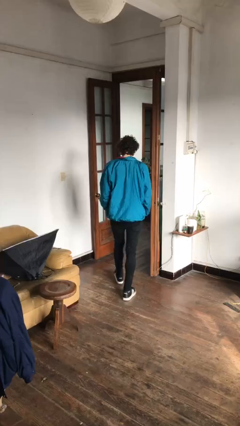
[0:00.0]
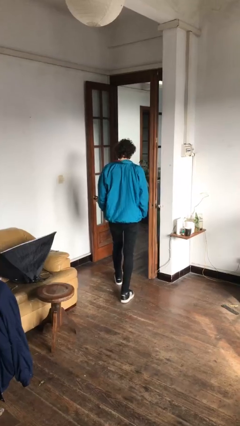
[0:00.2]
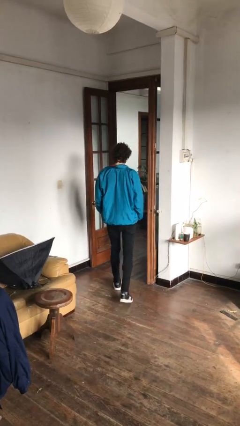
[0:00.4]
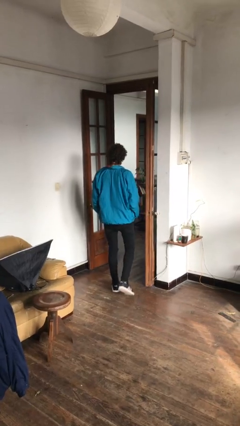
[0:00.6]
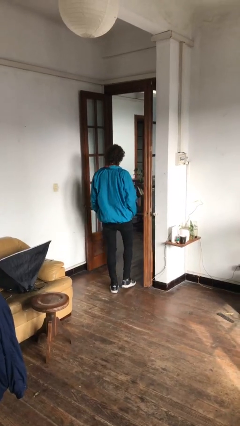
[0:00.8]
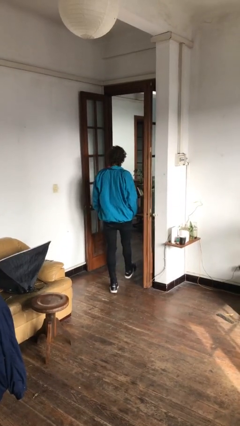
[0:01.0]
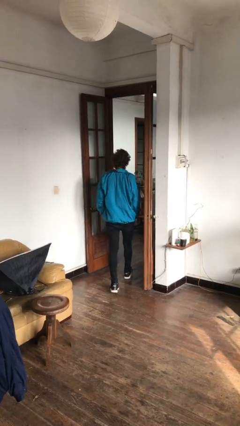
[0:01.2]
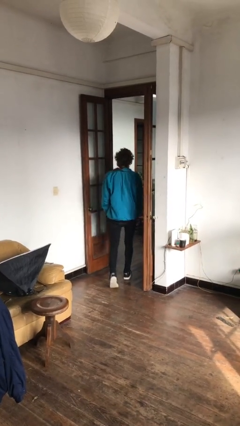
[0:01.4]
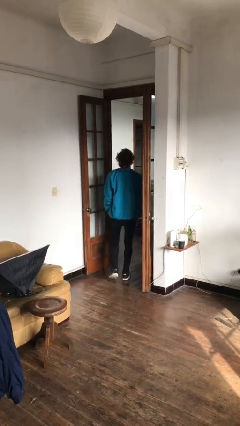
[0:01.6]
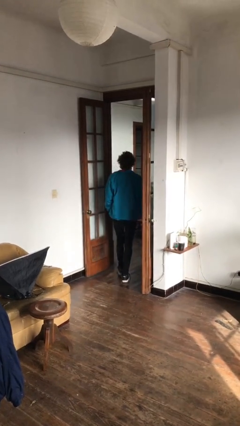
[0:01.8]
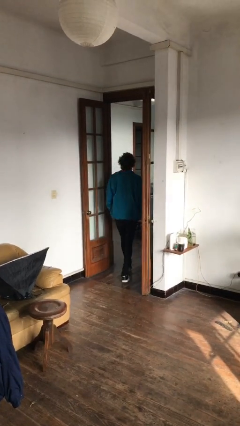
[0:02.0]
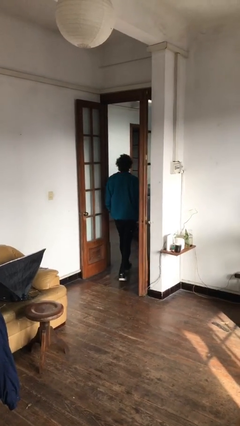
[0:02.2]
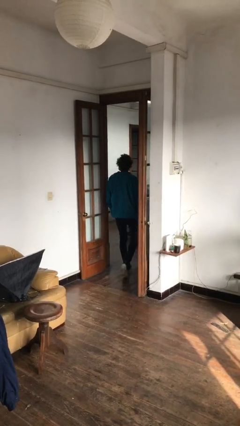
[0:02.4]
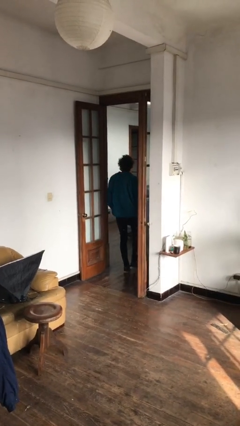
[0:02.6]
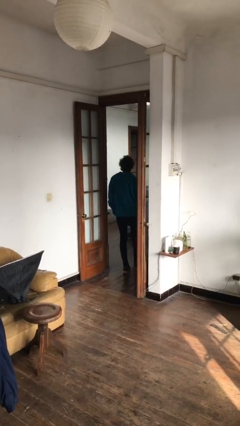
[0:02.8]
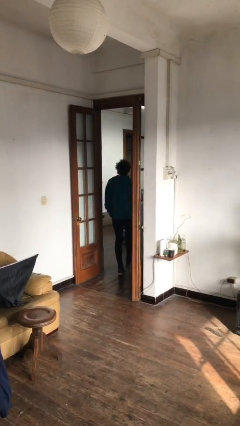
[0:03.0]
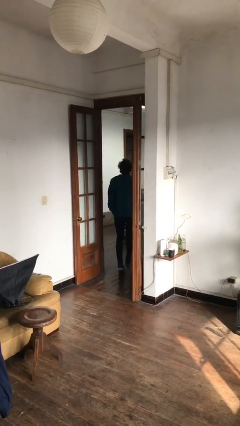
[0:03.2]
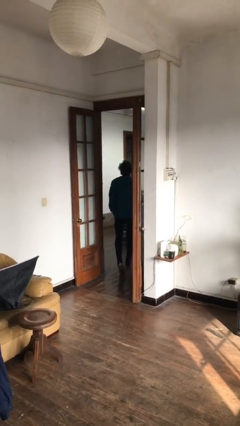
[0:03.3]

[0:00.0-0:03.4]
person exits scene through structure

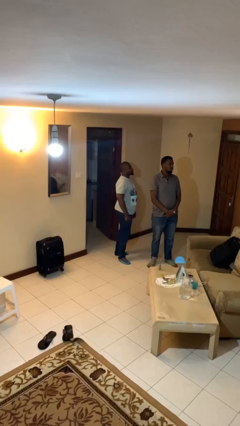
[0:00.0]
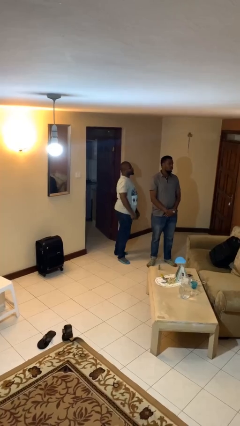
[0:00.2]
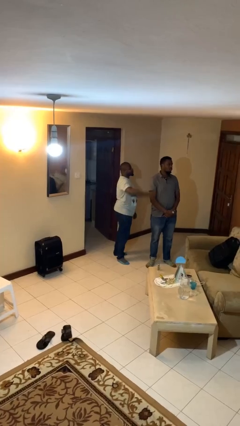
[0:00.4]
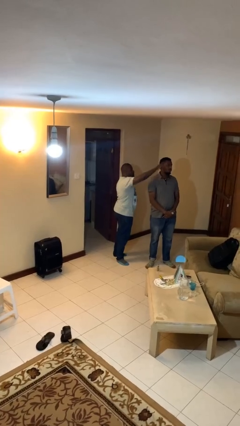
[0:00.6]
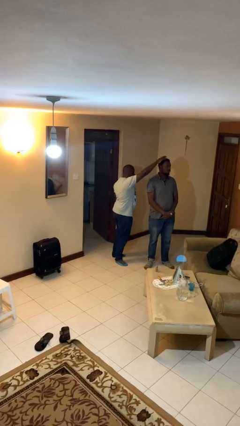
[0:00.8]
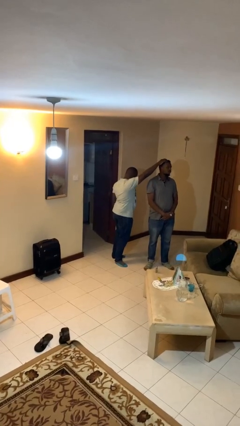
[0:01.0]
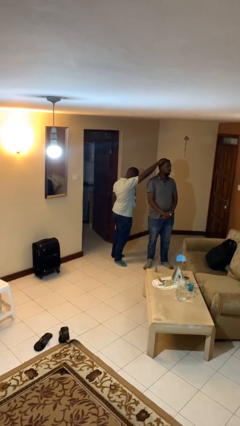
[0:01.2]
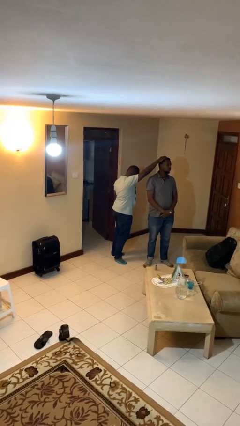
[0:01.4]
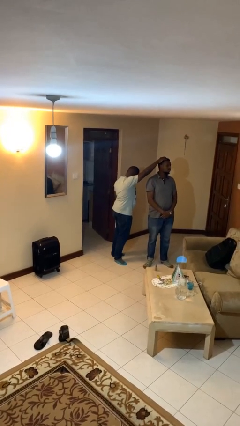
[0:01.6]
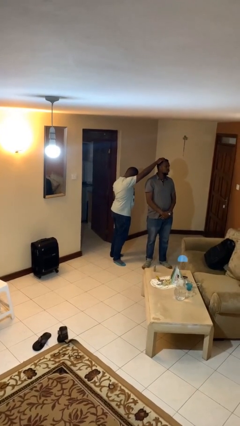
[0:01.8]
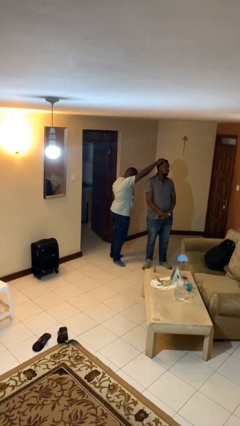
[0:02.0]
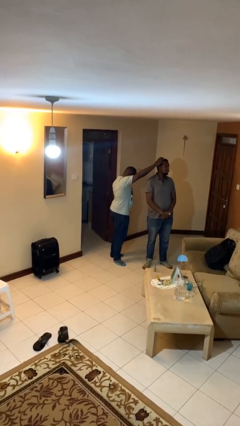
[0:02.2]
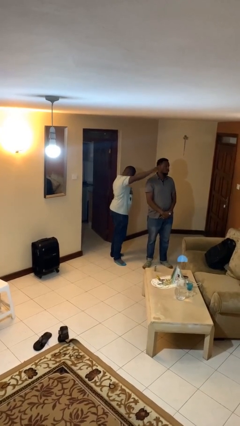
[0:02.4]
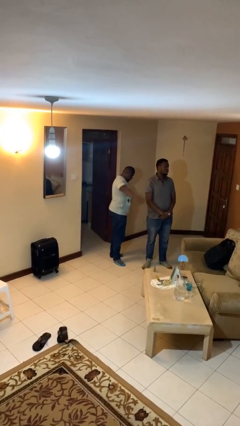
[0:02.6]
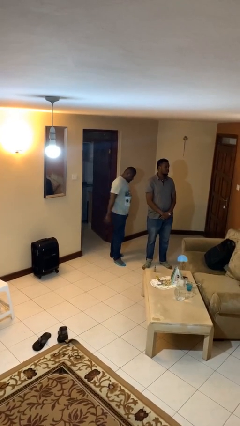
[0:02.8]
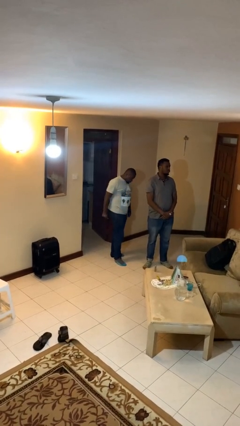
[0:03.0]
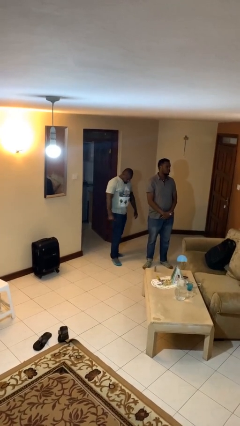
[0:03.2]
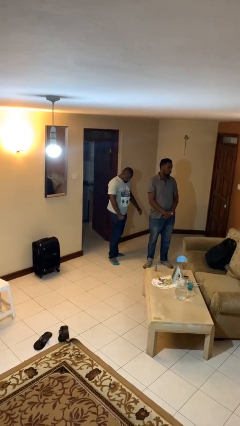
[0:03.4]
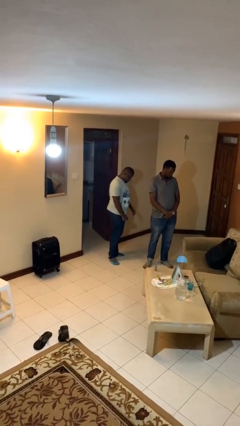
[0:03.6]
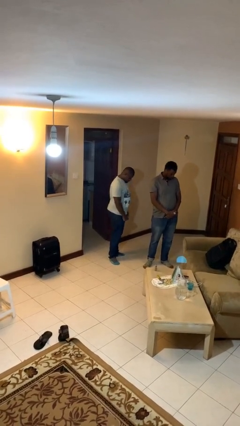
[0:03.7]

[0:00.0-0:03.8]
person grabs person by hair

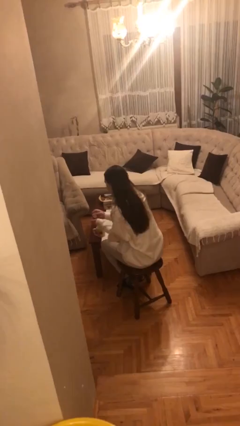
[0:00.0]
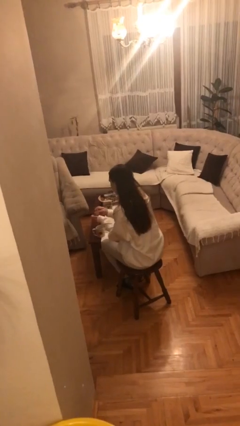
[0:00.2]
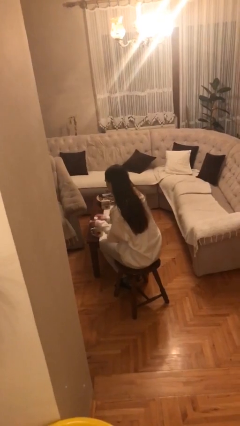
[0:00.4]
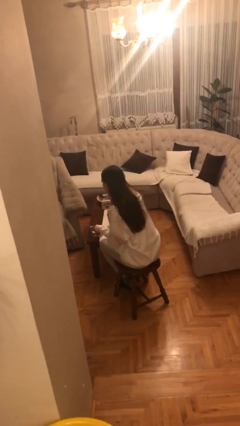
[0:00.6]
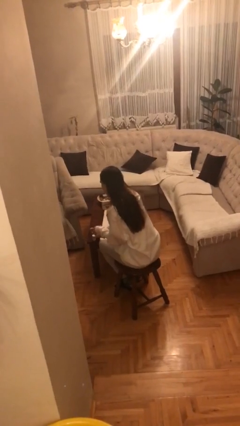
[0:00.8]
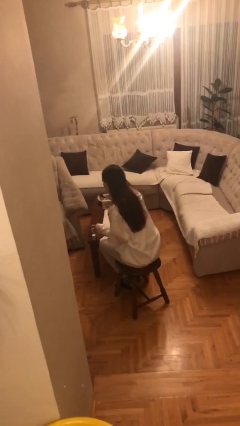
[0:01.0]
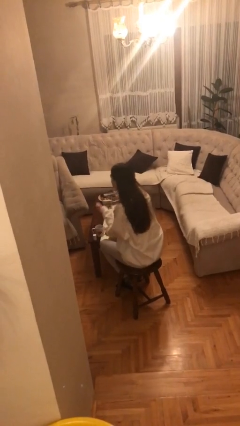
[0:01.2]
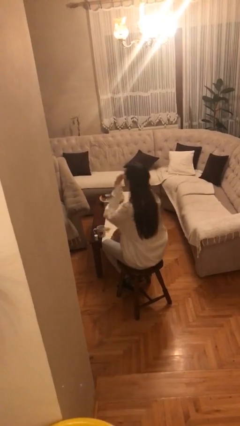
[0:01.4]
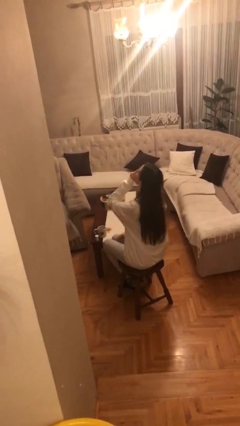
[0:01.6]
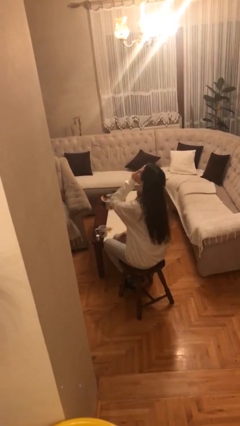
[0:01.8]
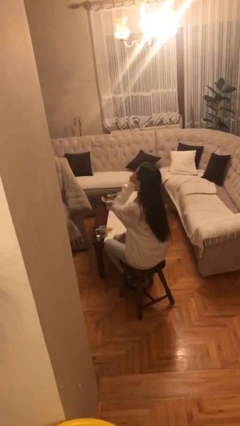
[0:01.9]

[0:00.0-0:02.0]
person takes medicine pills

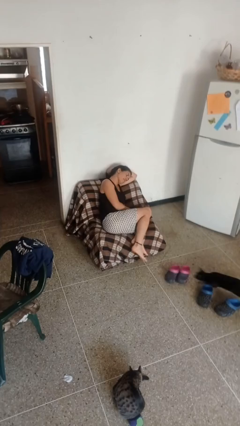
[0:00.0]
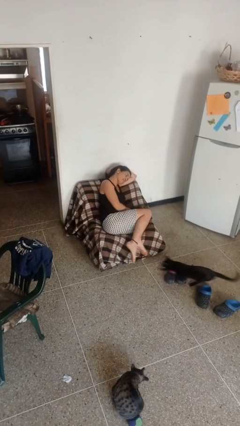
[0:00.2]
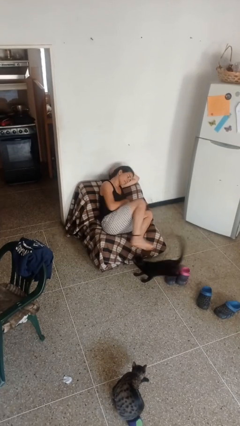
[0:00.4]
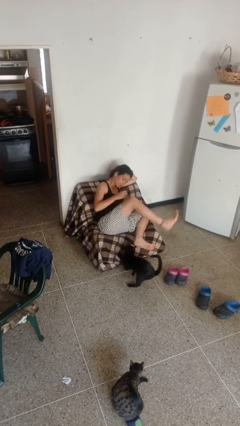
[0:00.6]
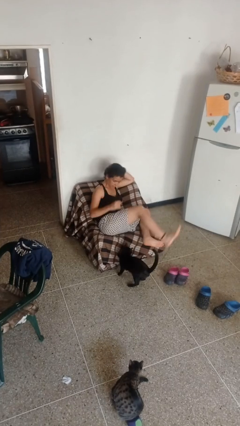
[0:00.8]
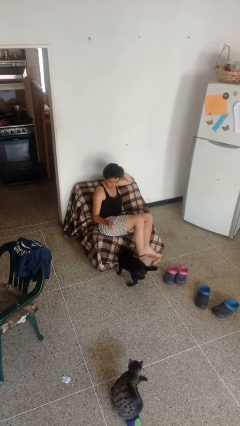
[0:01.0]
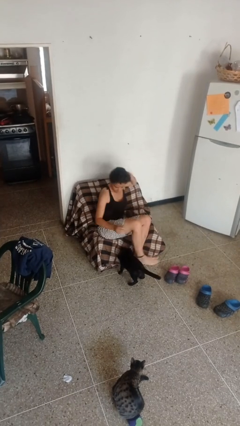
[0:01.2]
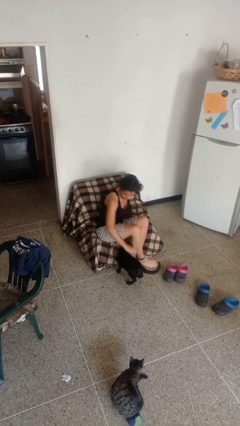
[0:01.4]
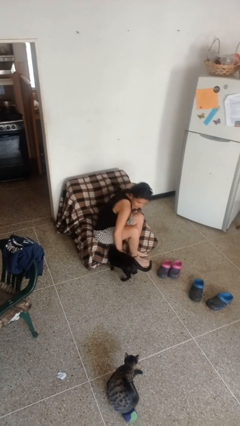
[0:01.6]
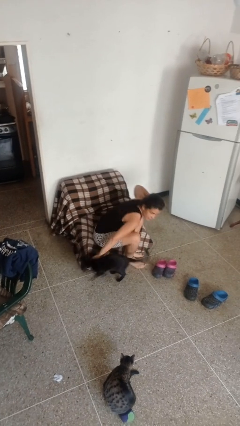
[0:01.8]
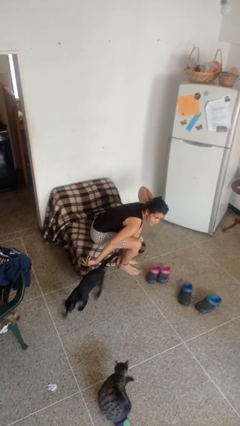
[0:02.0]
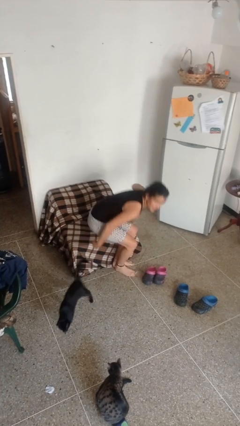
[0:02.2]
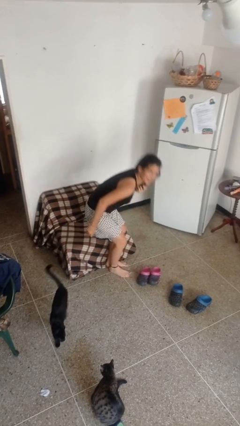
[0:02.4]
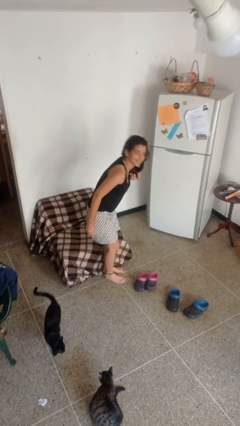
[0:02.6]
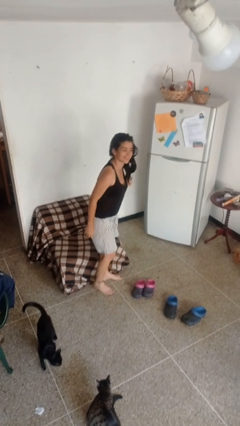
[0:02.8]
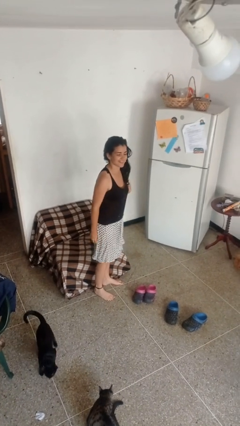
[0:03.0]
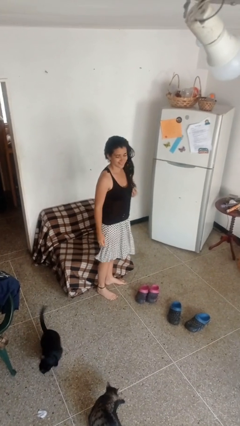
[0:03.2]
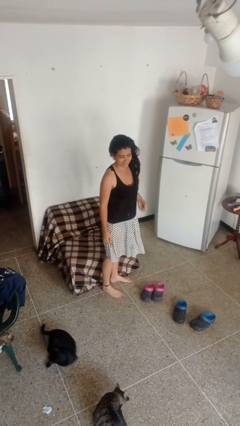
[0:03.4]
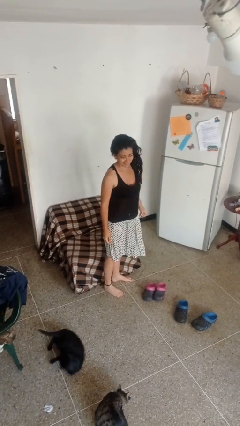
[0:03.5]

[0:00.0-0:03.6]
person stands up

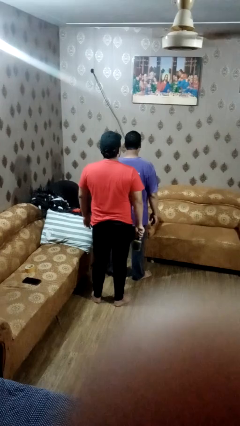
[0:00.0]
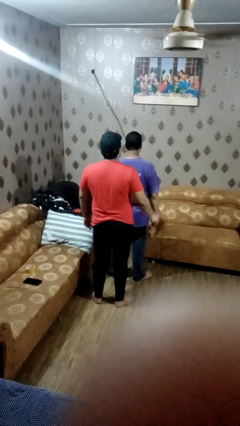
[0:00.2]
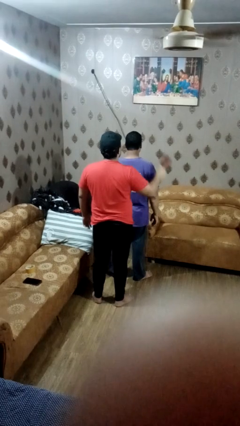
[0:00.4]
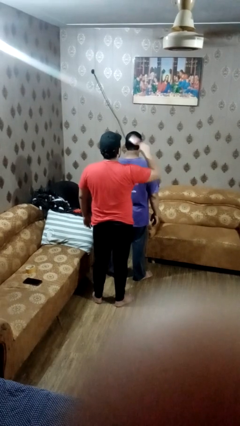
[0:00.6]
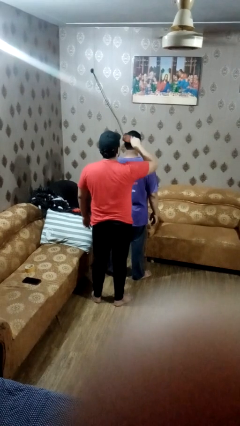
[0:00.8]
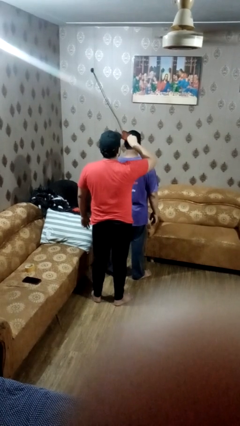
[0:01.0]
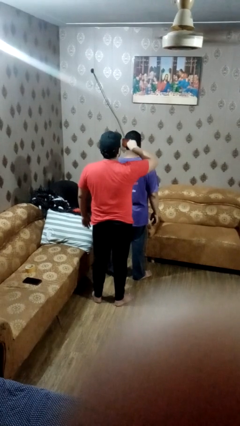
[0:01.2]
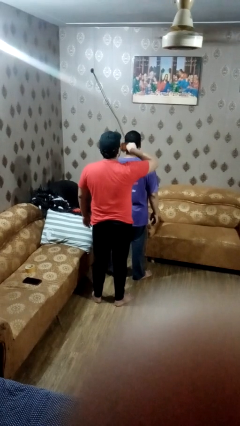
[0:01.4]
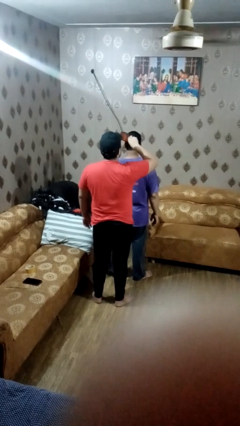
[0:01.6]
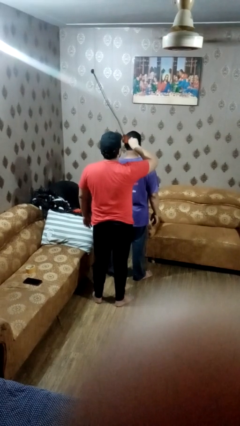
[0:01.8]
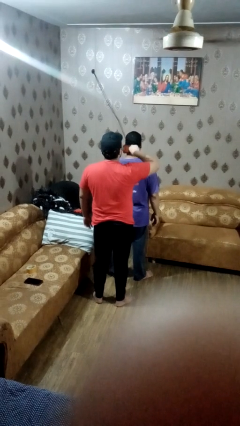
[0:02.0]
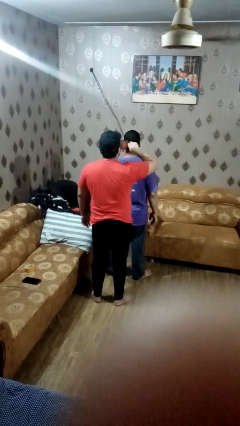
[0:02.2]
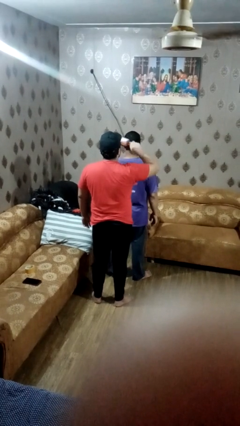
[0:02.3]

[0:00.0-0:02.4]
person brushes hair of person

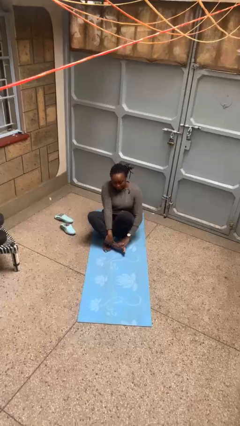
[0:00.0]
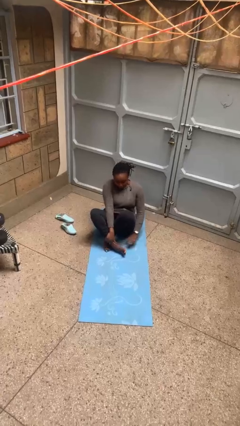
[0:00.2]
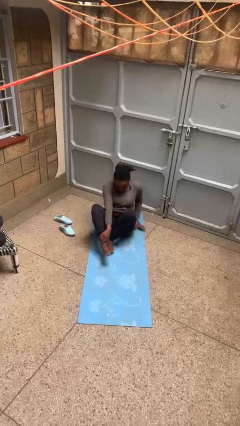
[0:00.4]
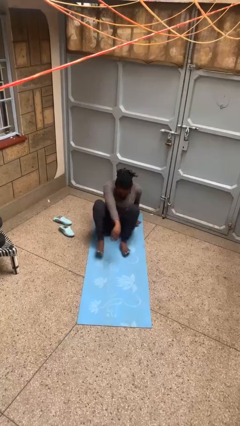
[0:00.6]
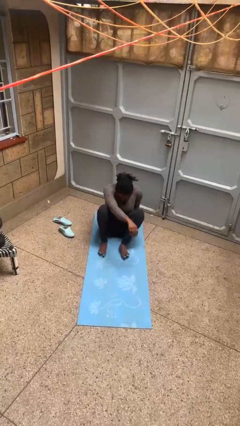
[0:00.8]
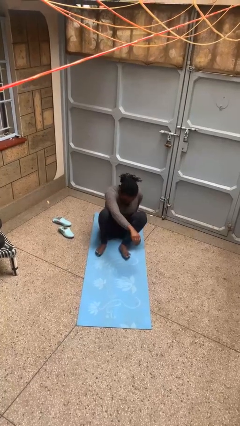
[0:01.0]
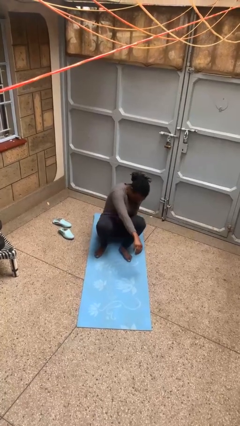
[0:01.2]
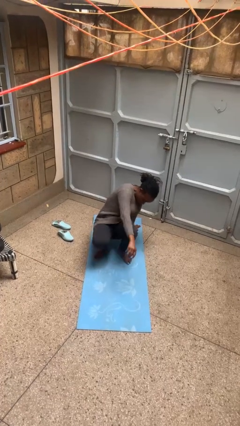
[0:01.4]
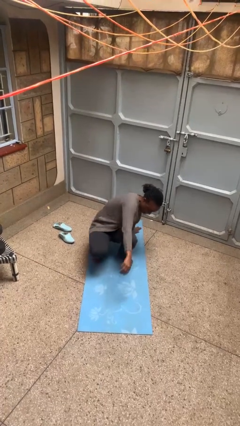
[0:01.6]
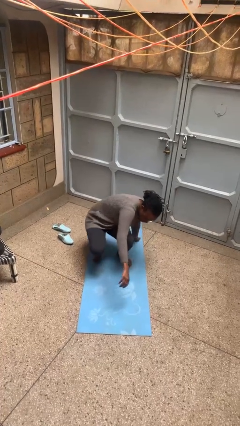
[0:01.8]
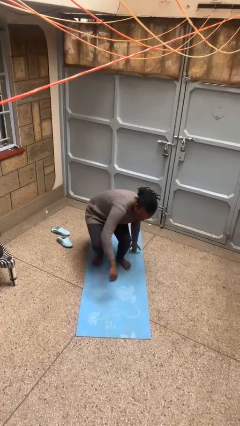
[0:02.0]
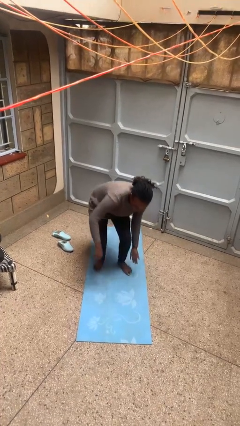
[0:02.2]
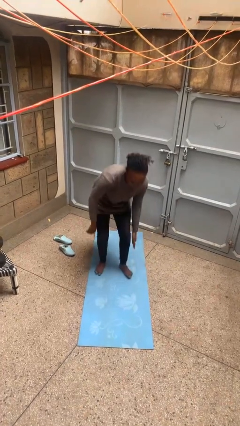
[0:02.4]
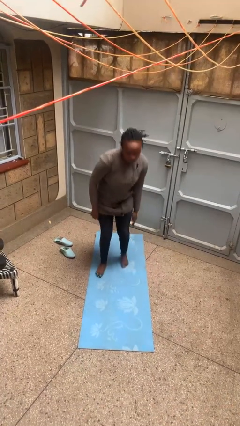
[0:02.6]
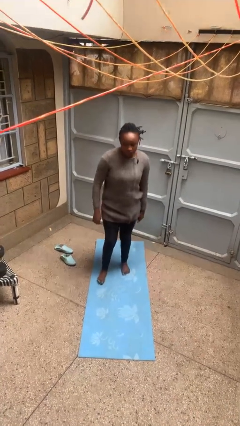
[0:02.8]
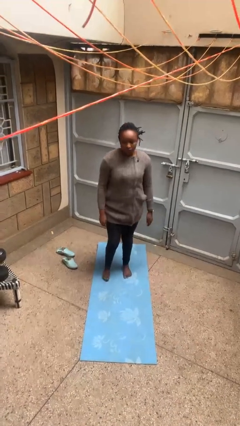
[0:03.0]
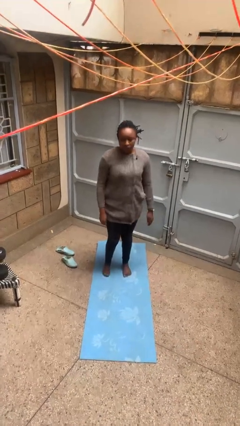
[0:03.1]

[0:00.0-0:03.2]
person stands up from floor
